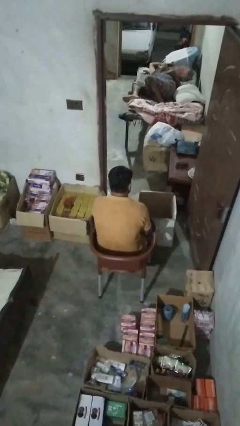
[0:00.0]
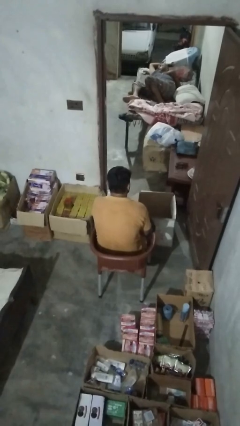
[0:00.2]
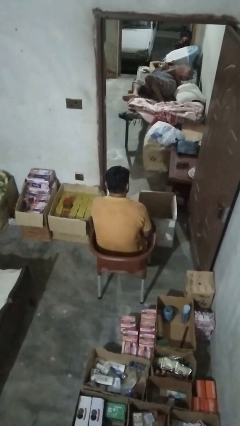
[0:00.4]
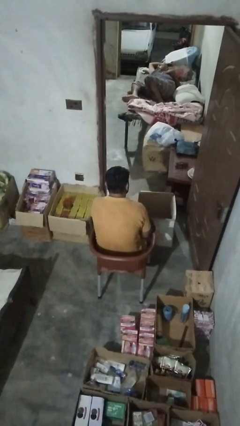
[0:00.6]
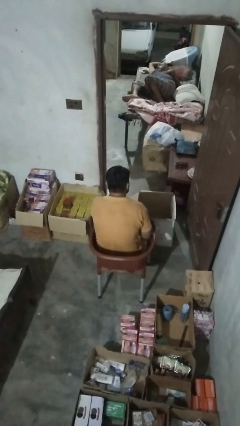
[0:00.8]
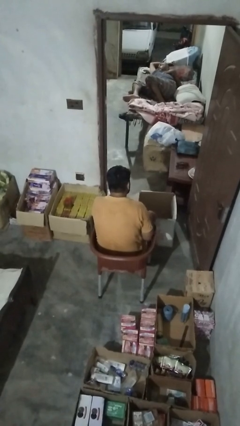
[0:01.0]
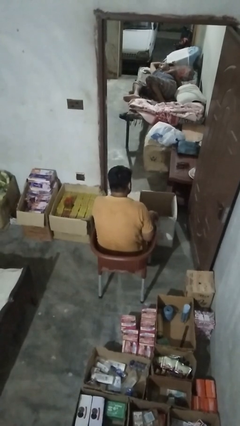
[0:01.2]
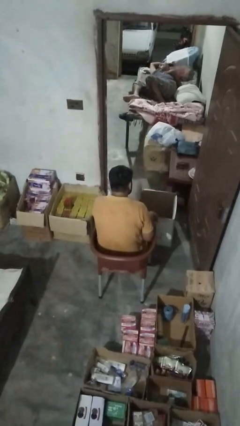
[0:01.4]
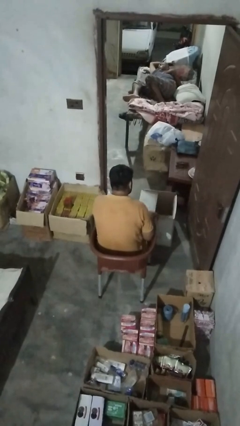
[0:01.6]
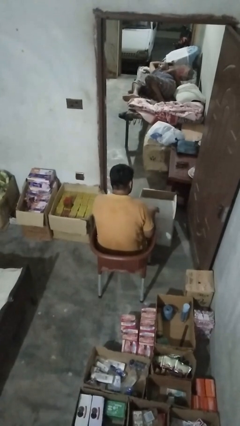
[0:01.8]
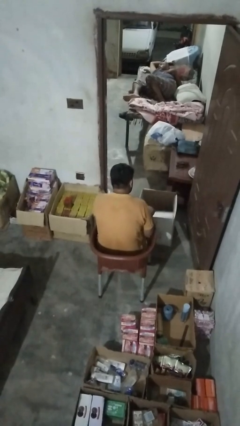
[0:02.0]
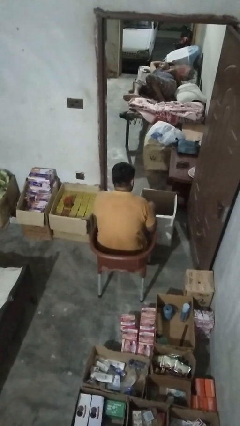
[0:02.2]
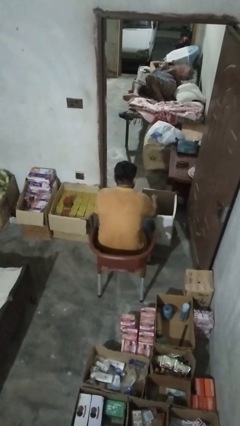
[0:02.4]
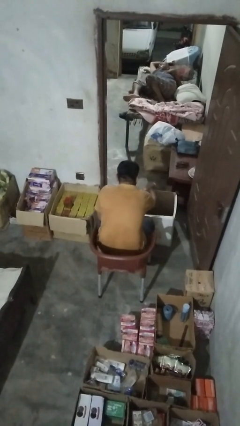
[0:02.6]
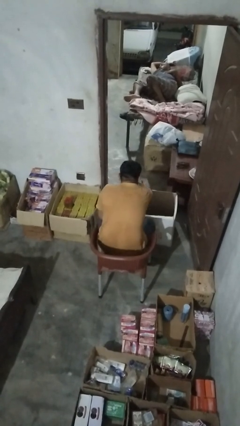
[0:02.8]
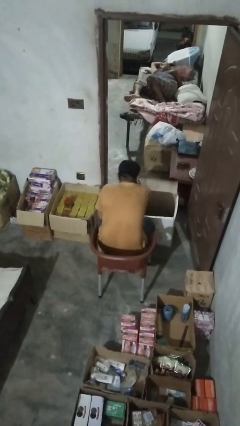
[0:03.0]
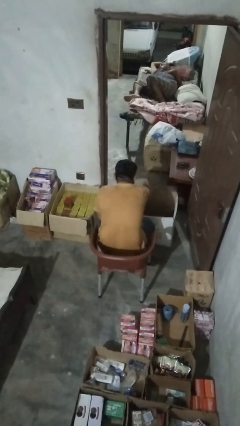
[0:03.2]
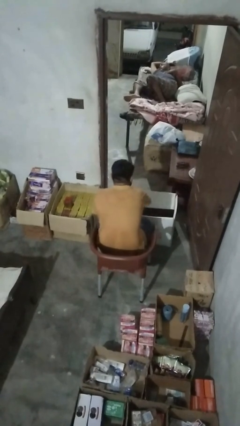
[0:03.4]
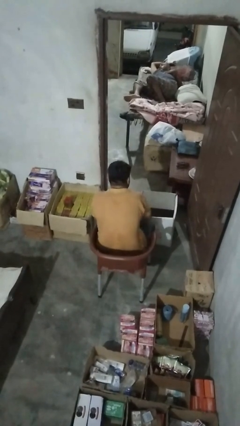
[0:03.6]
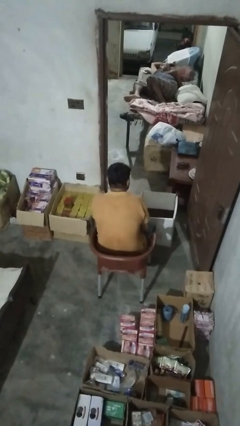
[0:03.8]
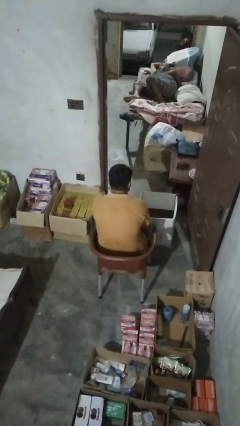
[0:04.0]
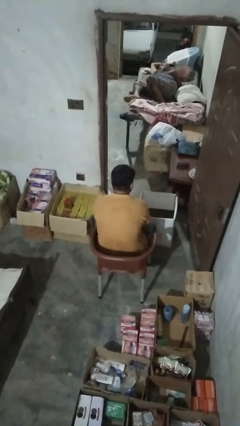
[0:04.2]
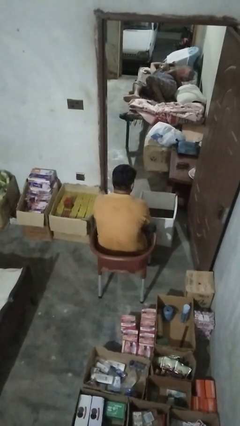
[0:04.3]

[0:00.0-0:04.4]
person opens box

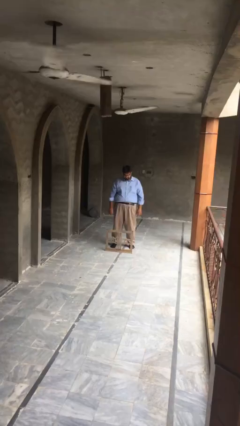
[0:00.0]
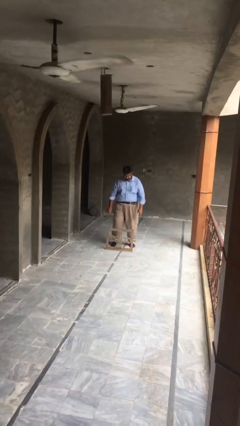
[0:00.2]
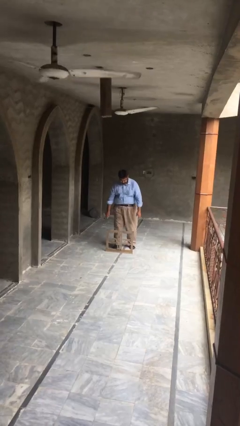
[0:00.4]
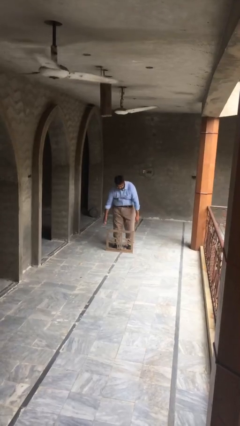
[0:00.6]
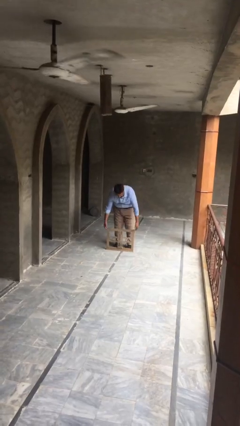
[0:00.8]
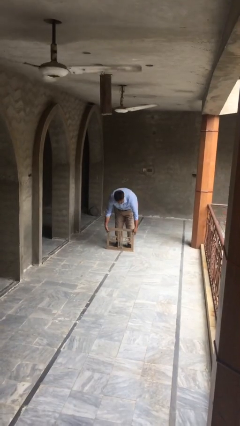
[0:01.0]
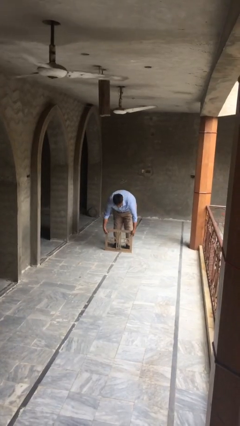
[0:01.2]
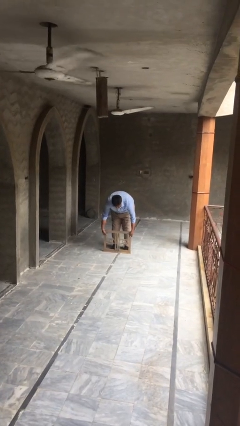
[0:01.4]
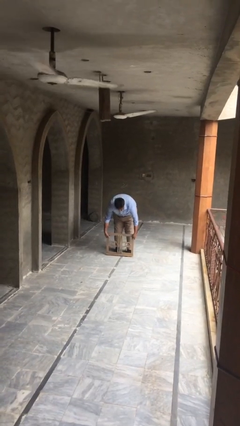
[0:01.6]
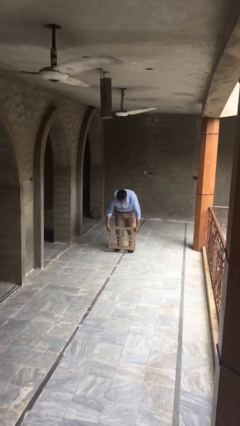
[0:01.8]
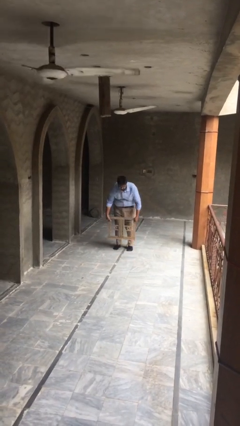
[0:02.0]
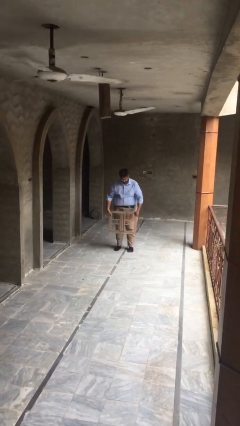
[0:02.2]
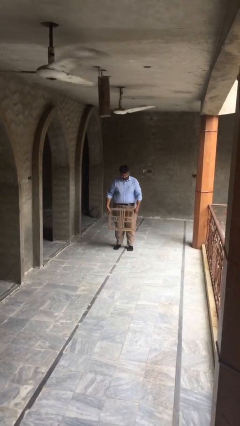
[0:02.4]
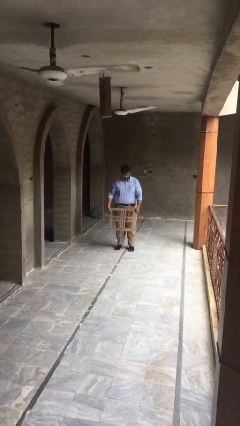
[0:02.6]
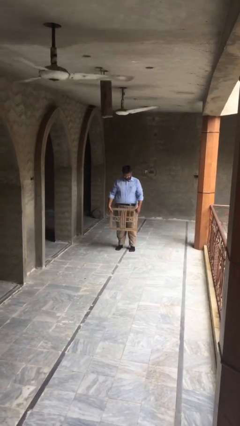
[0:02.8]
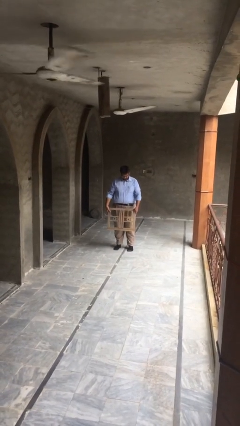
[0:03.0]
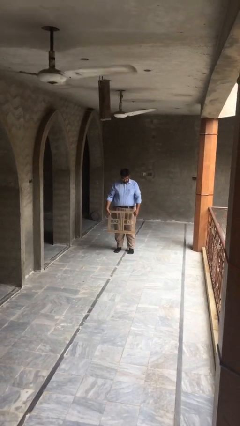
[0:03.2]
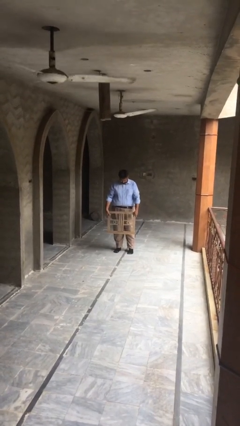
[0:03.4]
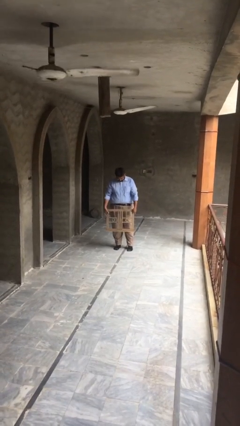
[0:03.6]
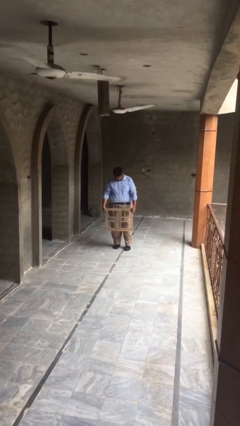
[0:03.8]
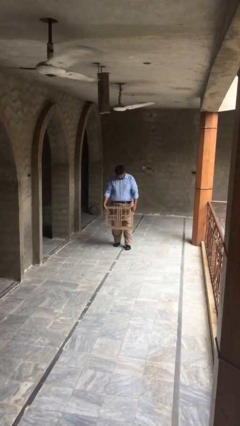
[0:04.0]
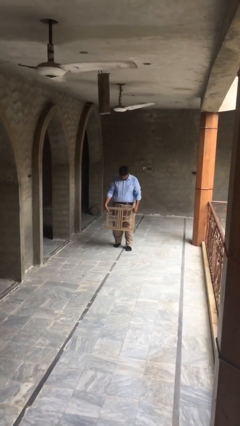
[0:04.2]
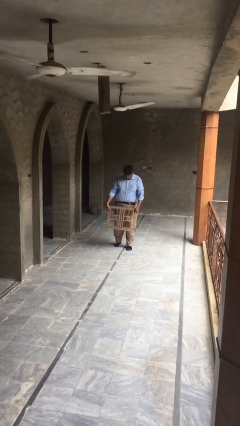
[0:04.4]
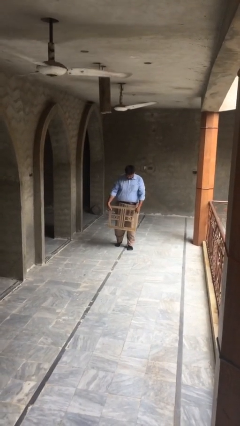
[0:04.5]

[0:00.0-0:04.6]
person picks up object from floor

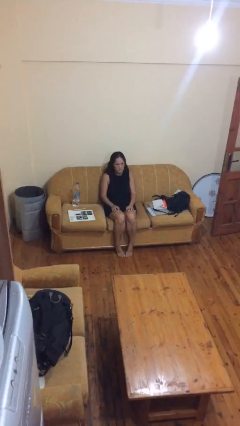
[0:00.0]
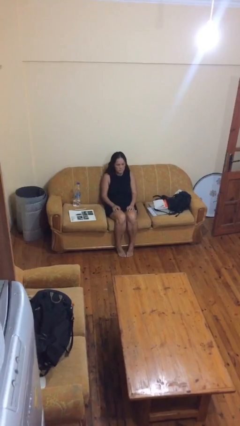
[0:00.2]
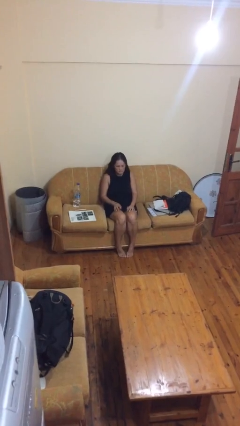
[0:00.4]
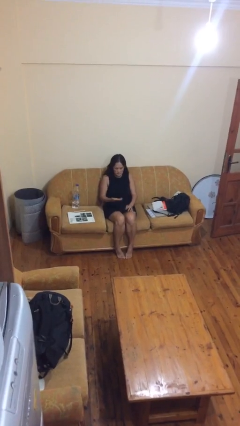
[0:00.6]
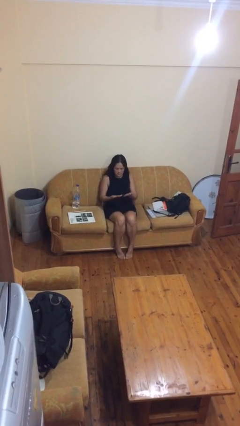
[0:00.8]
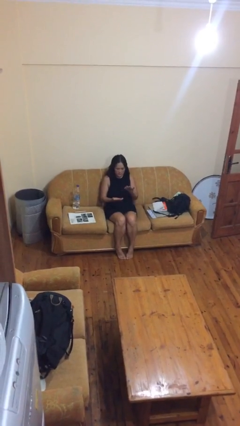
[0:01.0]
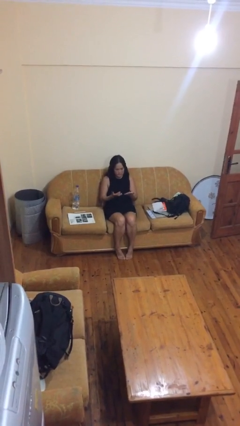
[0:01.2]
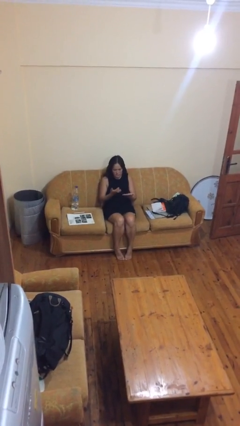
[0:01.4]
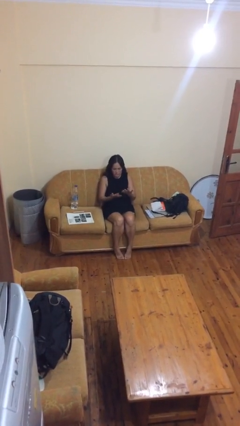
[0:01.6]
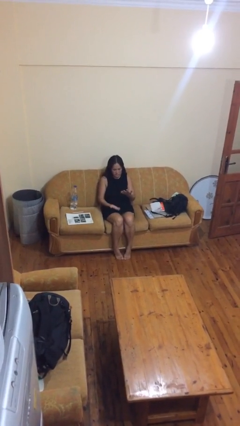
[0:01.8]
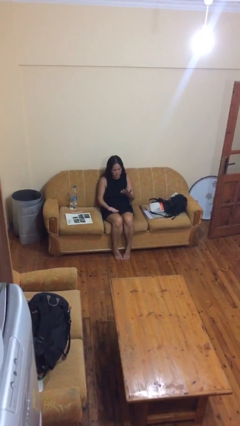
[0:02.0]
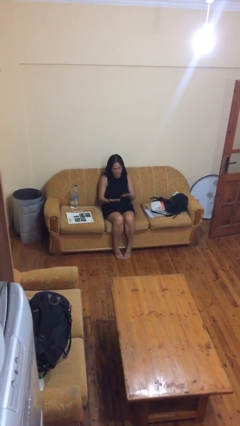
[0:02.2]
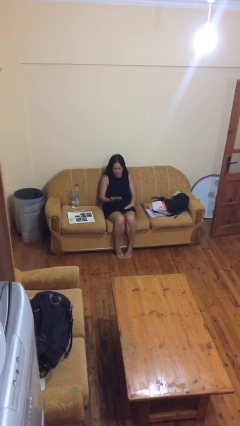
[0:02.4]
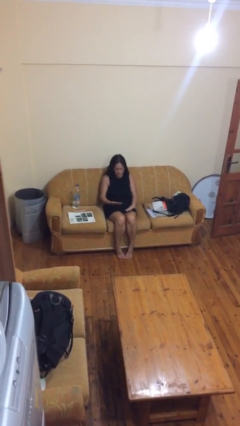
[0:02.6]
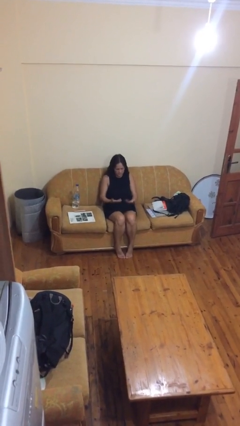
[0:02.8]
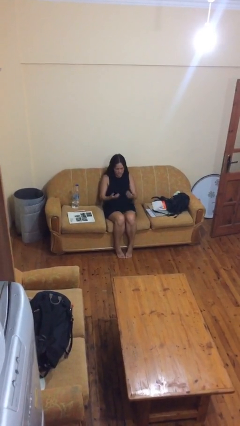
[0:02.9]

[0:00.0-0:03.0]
person looks at hands in lap

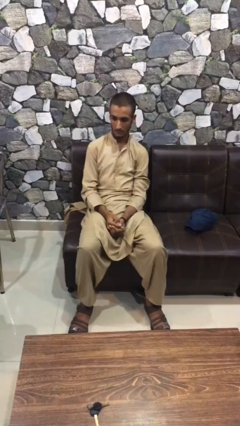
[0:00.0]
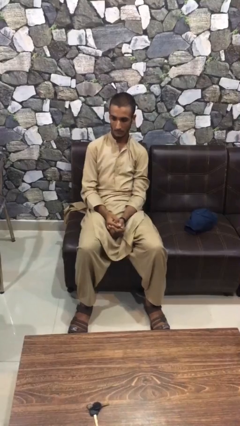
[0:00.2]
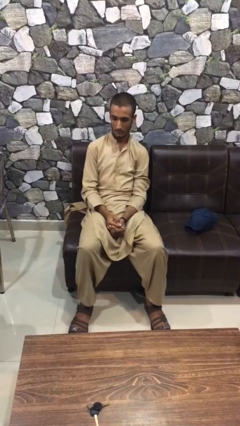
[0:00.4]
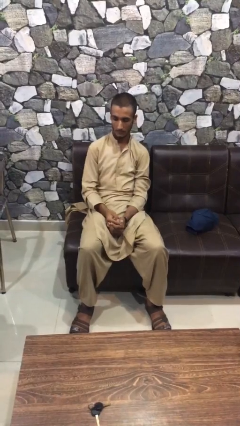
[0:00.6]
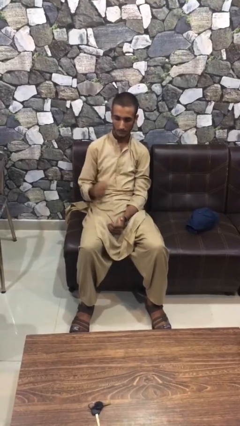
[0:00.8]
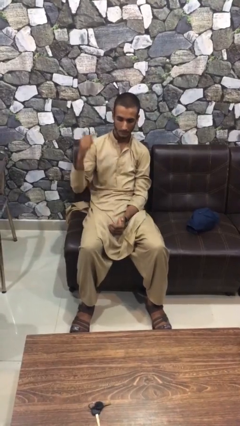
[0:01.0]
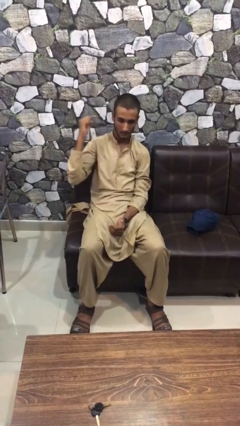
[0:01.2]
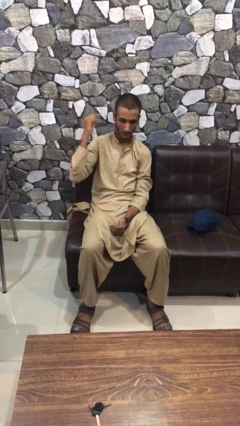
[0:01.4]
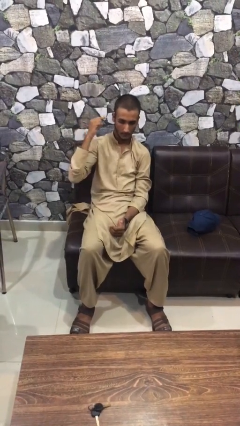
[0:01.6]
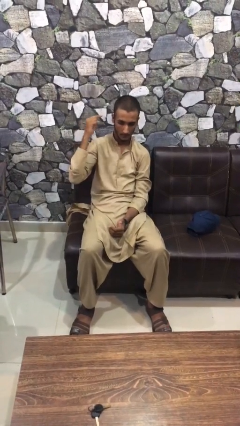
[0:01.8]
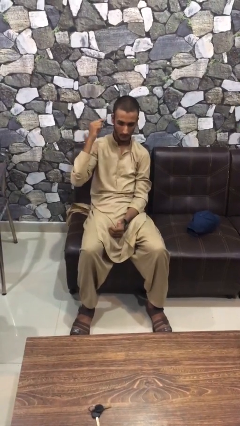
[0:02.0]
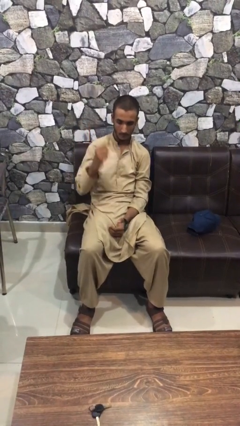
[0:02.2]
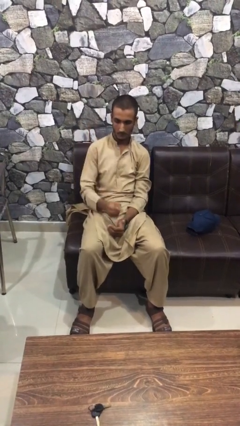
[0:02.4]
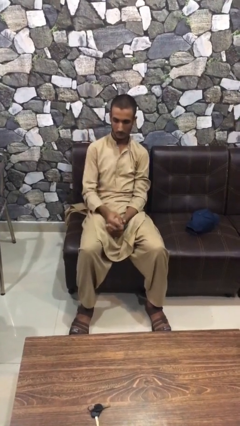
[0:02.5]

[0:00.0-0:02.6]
person gestures listen closely

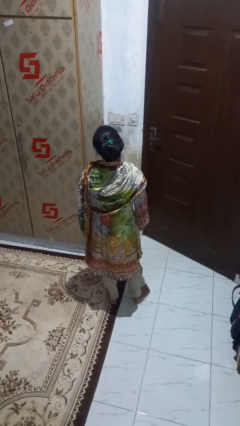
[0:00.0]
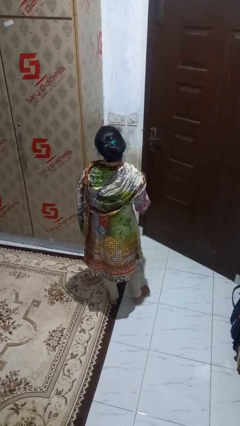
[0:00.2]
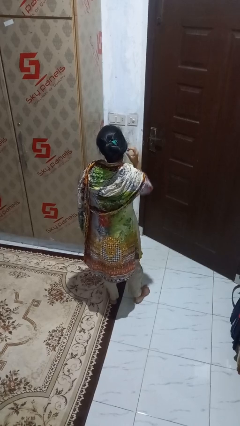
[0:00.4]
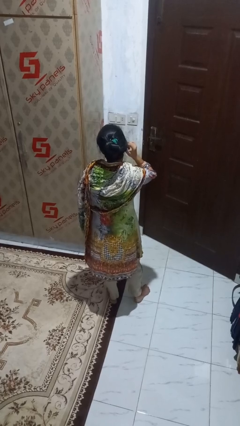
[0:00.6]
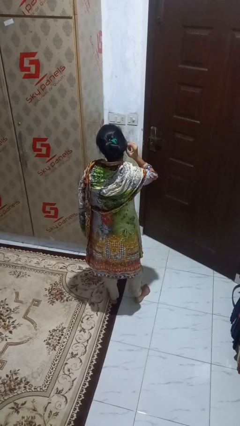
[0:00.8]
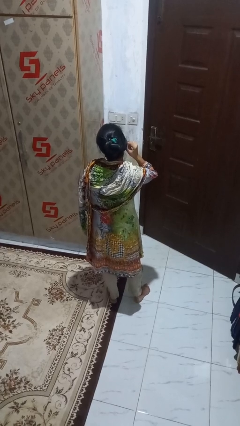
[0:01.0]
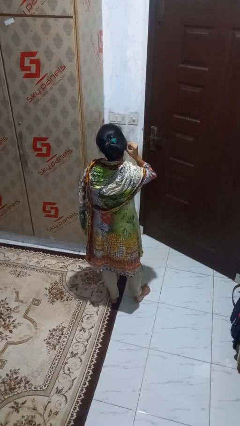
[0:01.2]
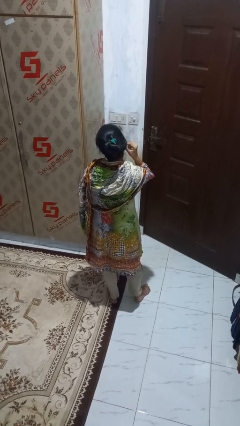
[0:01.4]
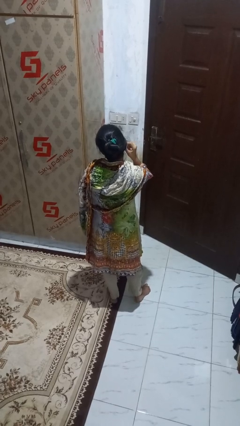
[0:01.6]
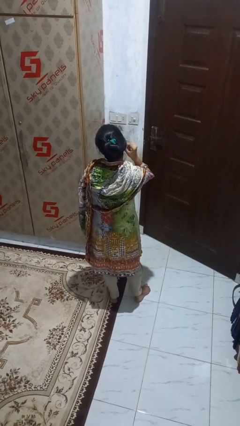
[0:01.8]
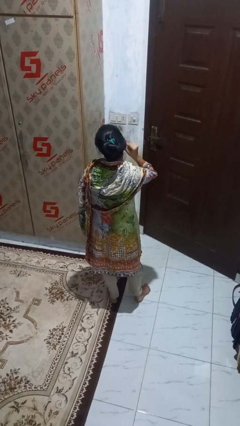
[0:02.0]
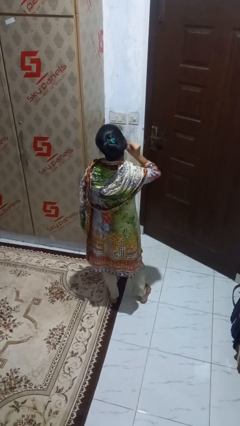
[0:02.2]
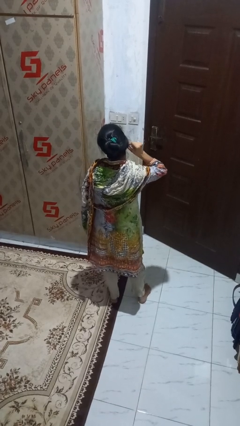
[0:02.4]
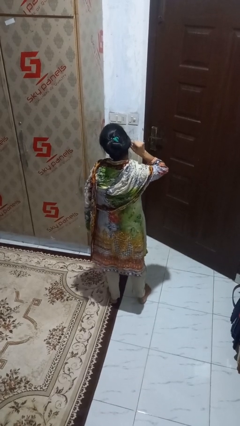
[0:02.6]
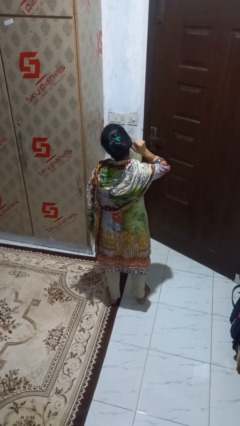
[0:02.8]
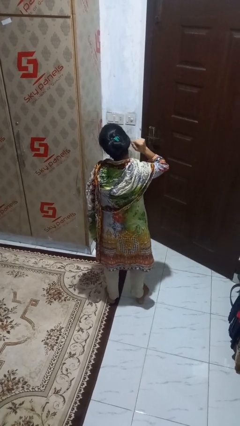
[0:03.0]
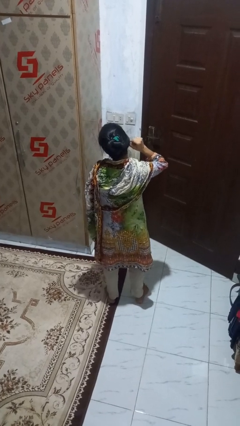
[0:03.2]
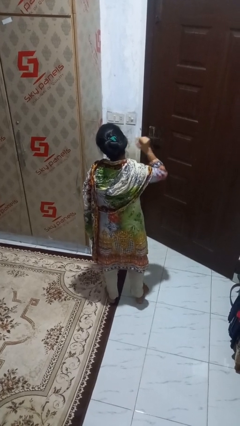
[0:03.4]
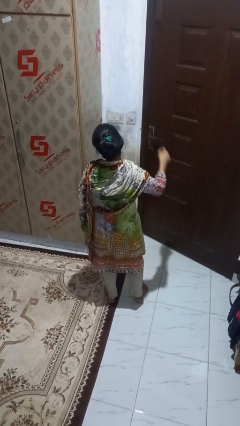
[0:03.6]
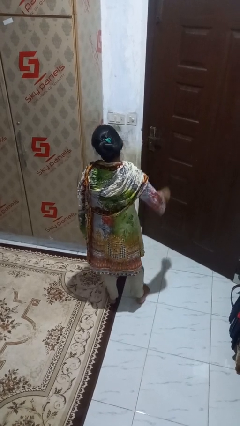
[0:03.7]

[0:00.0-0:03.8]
person touches earlobe
